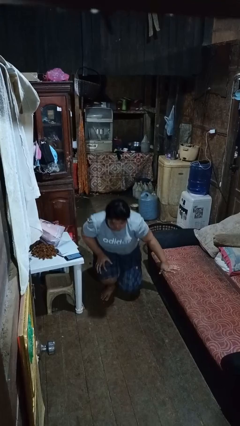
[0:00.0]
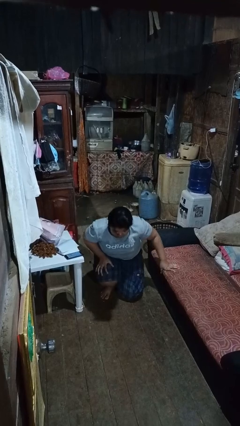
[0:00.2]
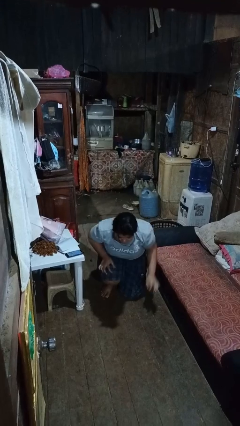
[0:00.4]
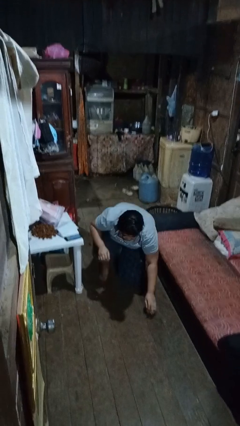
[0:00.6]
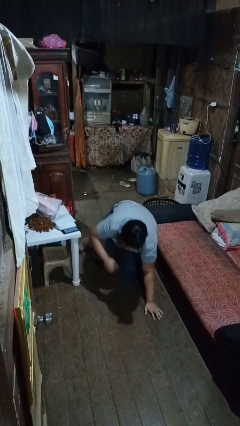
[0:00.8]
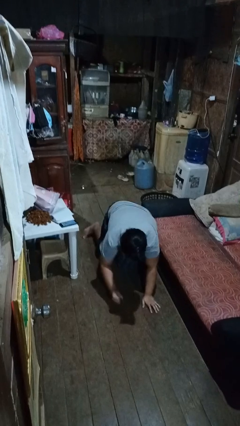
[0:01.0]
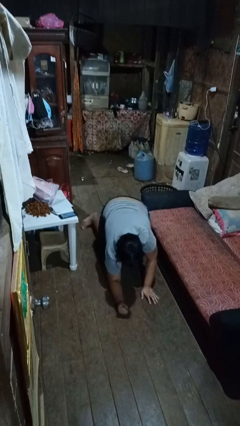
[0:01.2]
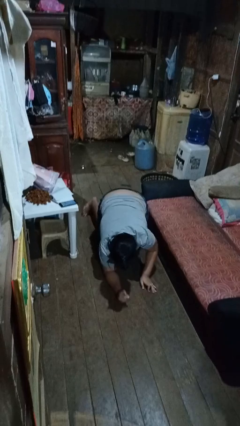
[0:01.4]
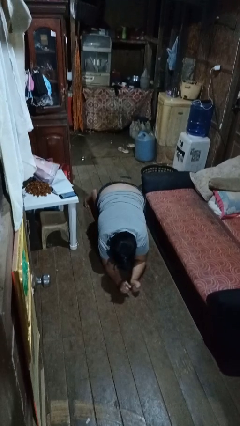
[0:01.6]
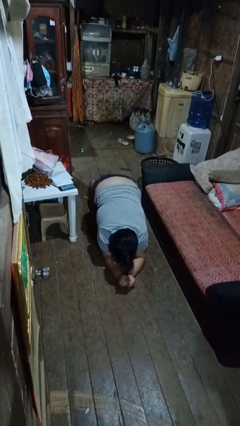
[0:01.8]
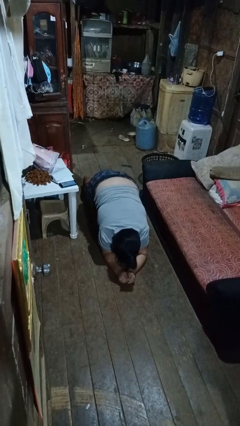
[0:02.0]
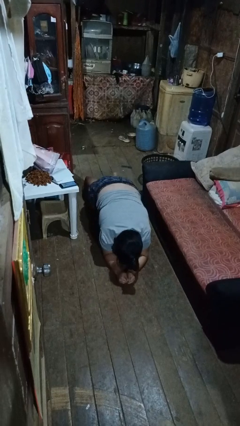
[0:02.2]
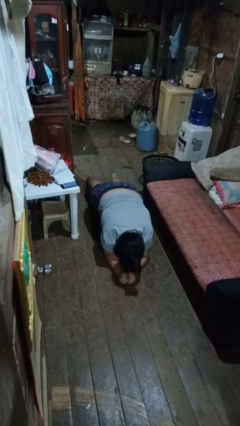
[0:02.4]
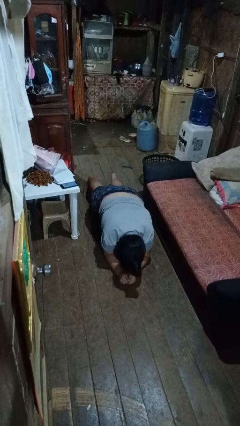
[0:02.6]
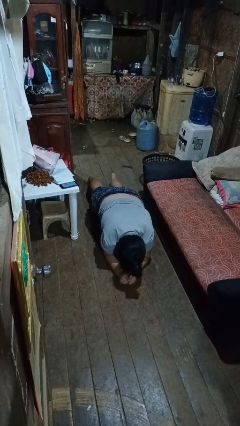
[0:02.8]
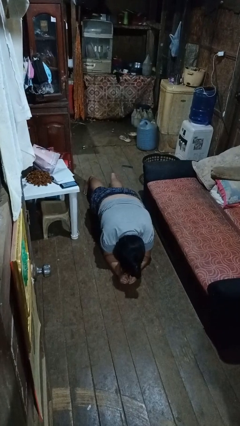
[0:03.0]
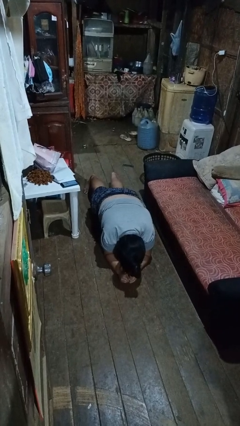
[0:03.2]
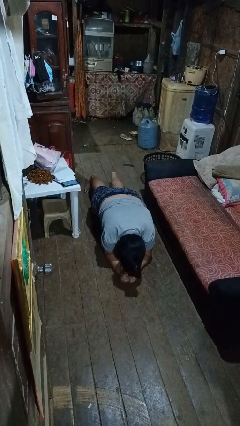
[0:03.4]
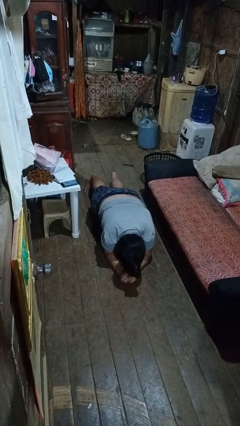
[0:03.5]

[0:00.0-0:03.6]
person exercises with plank

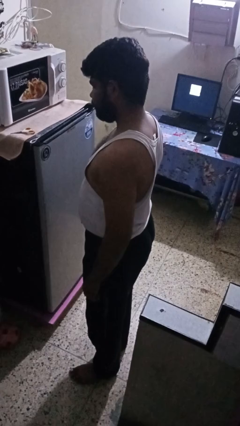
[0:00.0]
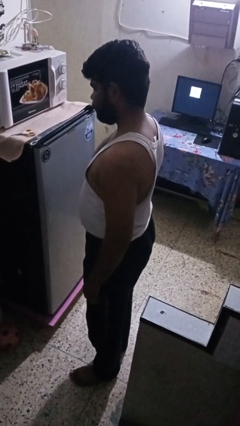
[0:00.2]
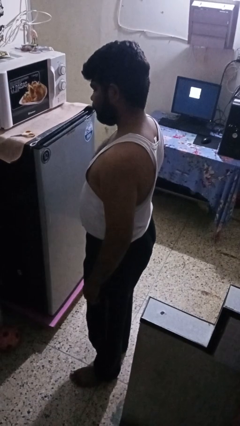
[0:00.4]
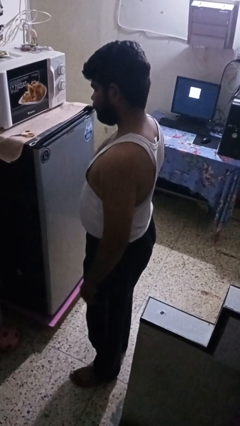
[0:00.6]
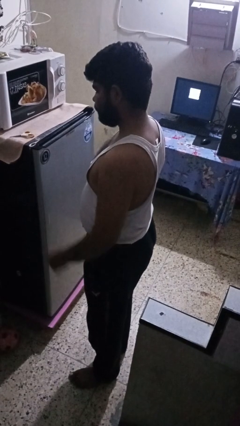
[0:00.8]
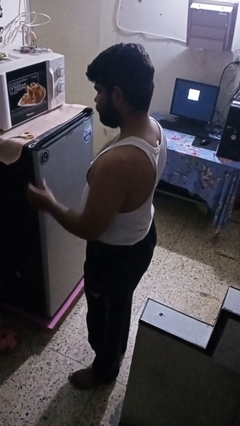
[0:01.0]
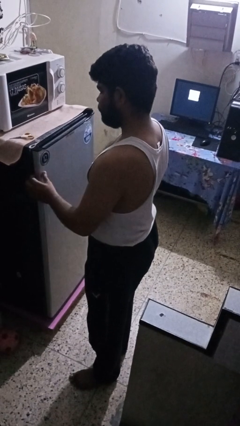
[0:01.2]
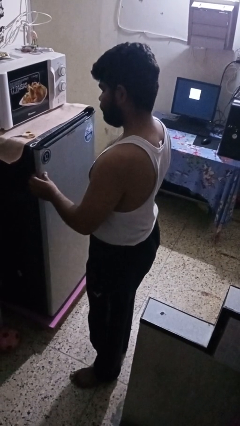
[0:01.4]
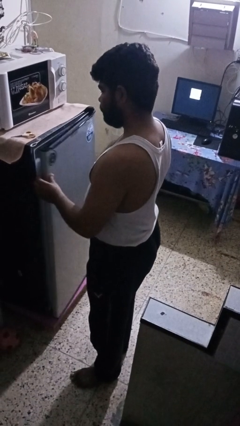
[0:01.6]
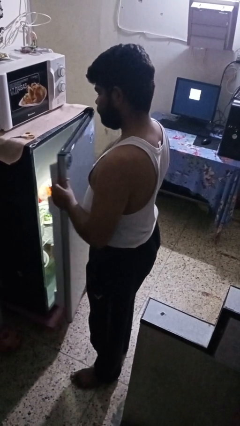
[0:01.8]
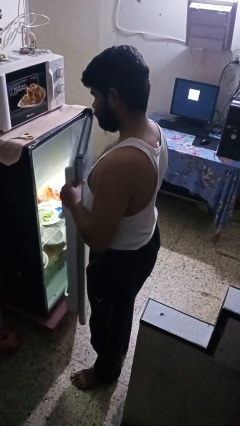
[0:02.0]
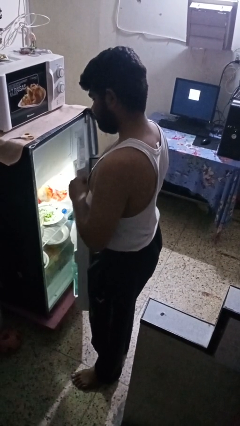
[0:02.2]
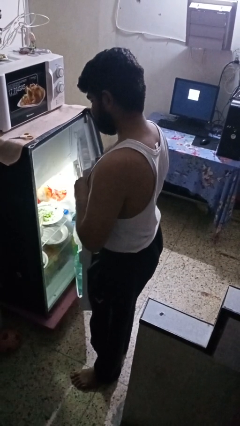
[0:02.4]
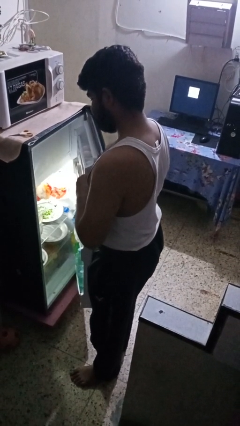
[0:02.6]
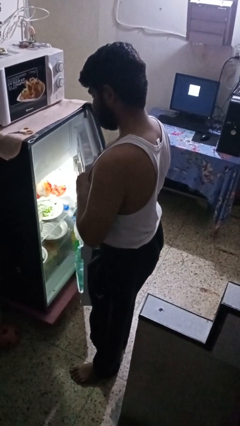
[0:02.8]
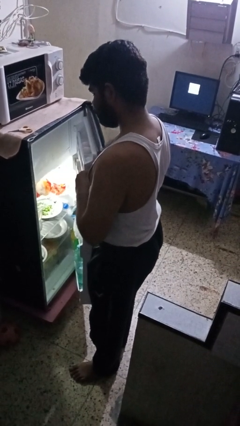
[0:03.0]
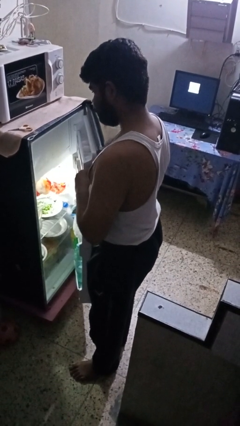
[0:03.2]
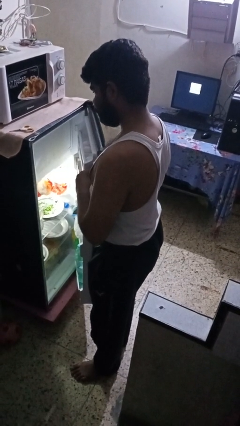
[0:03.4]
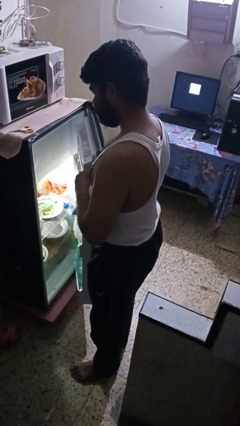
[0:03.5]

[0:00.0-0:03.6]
person opens refrigerator

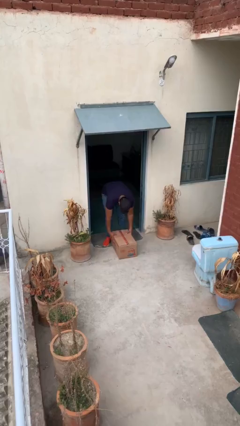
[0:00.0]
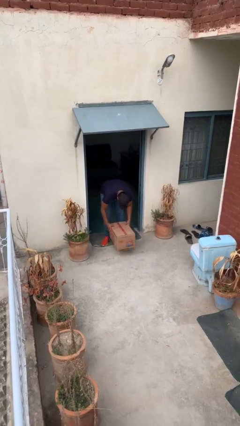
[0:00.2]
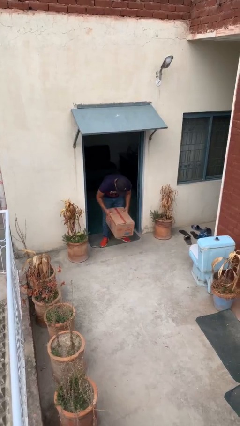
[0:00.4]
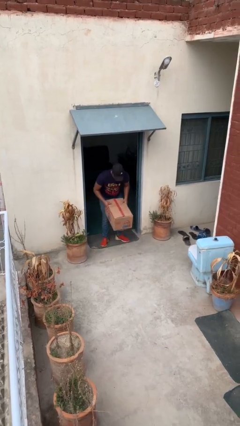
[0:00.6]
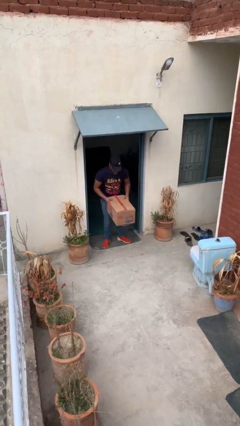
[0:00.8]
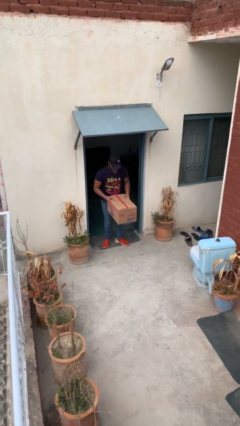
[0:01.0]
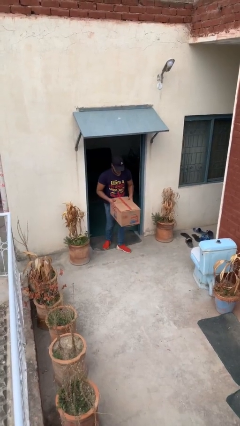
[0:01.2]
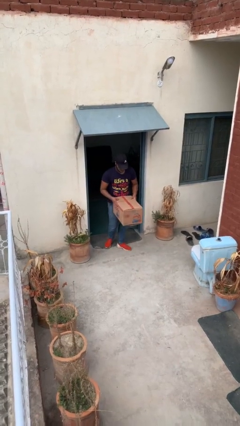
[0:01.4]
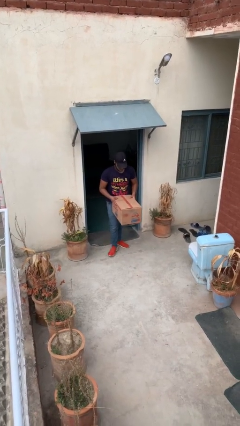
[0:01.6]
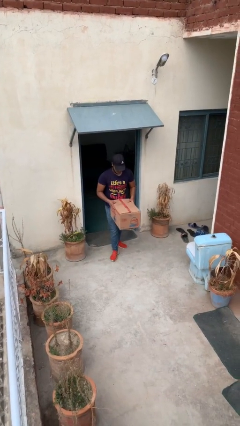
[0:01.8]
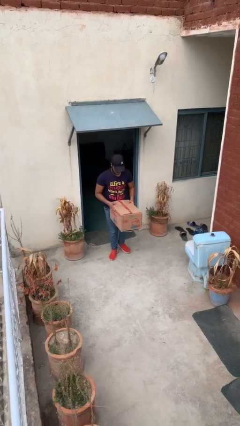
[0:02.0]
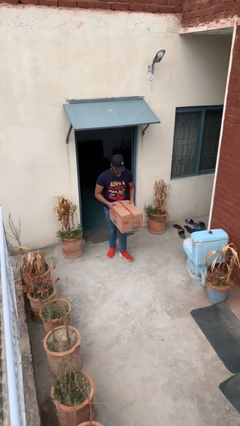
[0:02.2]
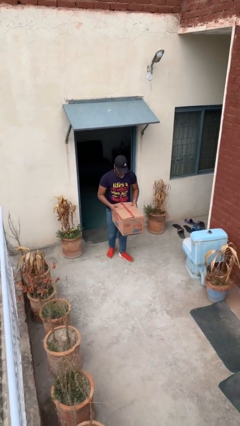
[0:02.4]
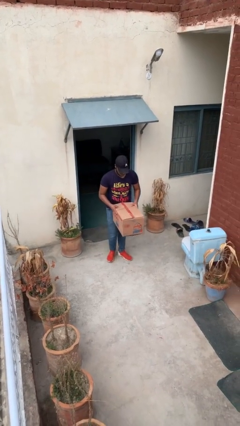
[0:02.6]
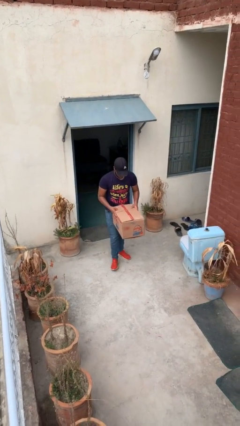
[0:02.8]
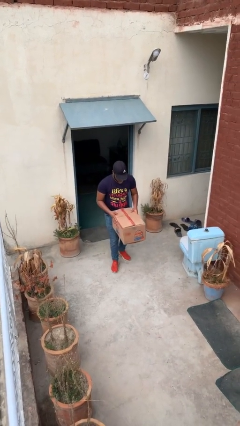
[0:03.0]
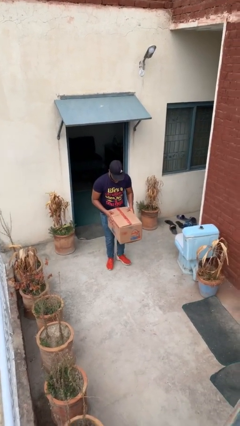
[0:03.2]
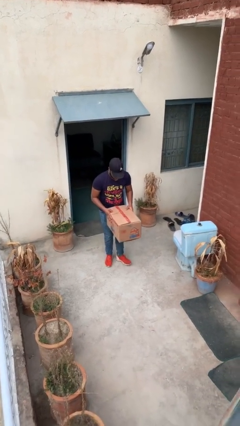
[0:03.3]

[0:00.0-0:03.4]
person carries heavy object

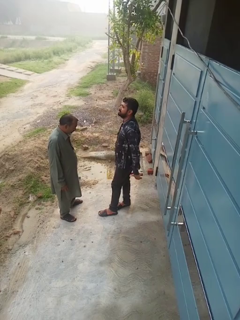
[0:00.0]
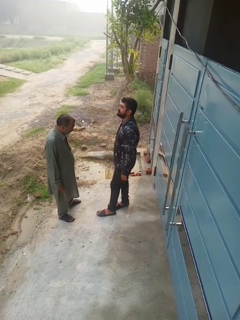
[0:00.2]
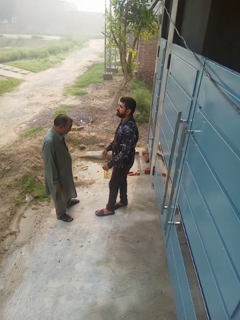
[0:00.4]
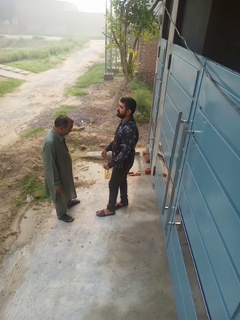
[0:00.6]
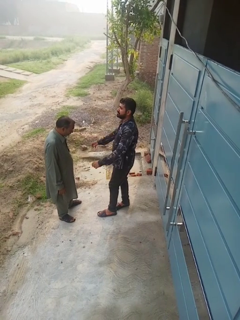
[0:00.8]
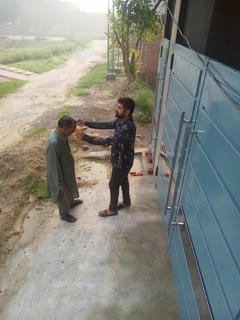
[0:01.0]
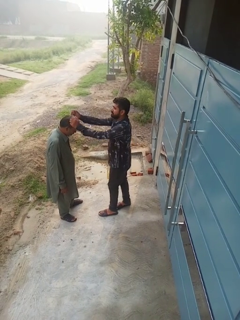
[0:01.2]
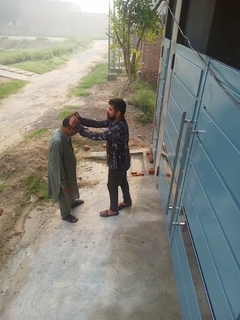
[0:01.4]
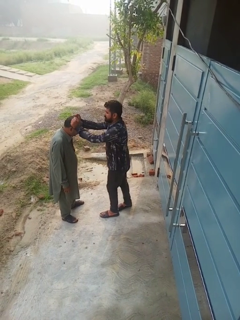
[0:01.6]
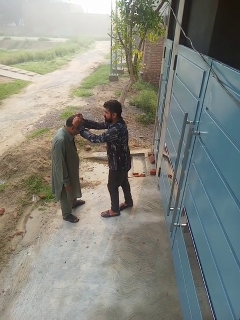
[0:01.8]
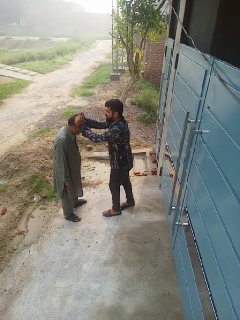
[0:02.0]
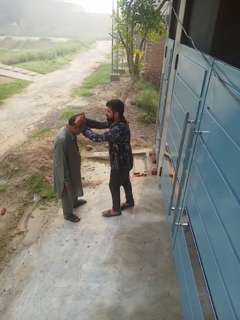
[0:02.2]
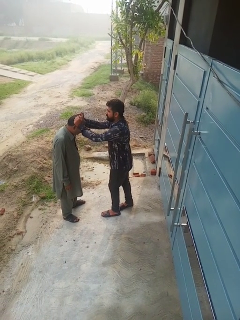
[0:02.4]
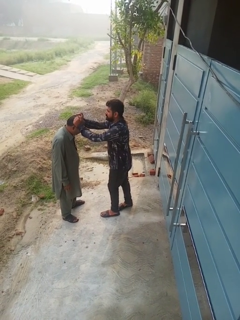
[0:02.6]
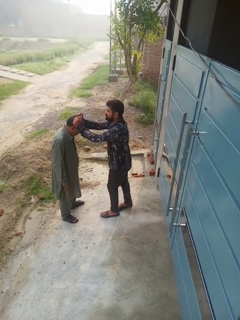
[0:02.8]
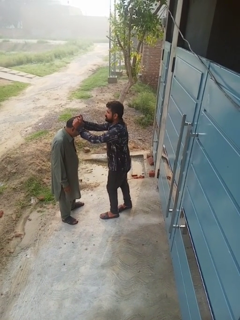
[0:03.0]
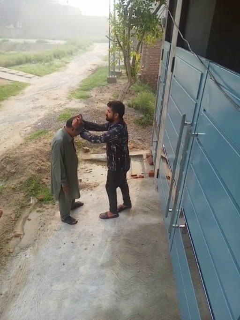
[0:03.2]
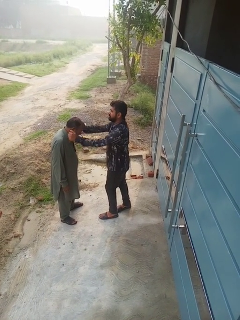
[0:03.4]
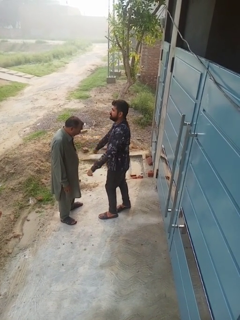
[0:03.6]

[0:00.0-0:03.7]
person grabs person by hair

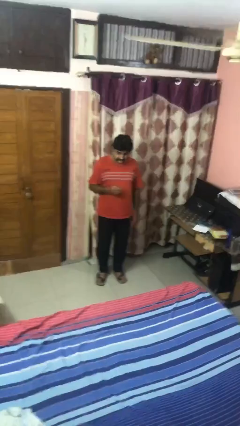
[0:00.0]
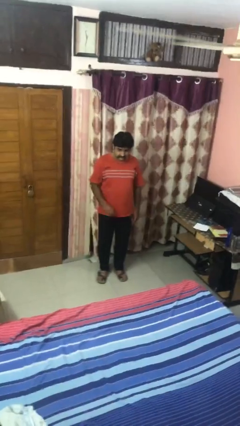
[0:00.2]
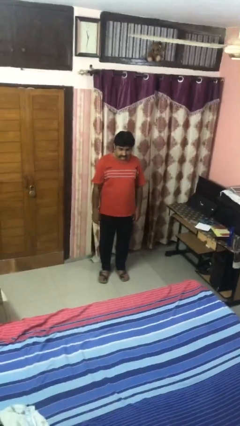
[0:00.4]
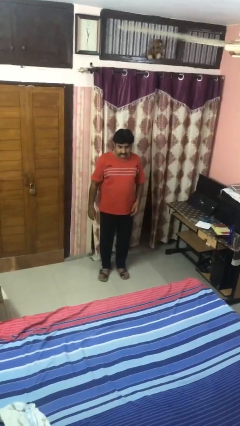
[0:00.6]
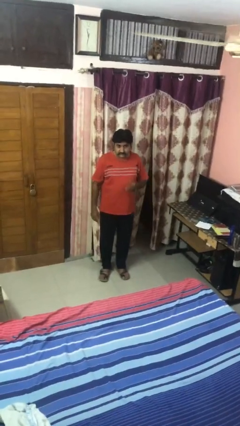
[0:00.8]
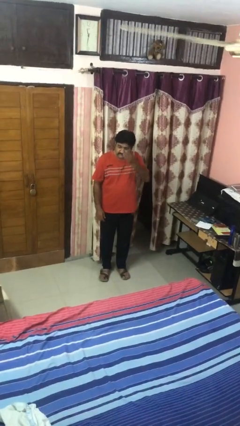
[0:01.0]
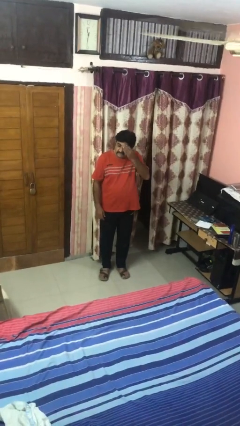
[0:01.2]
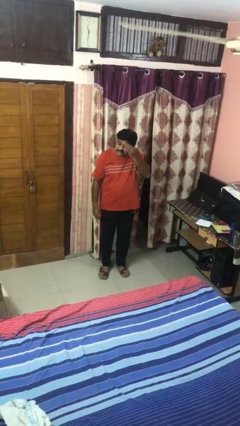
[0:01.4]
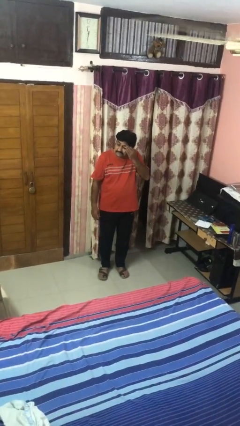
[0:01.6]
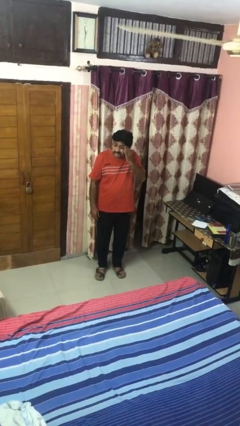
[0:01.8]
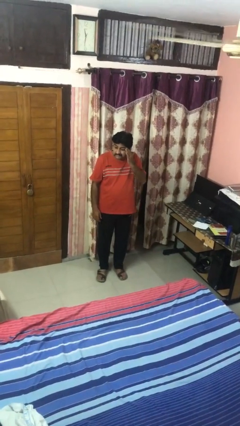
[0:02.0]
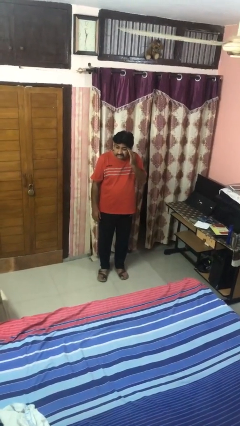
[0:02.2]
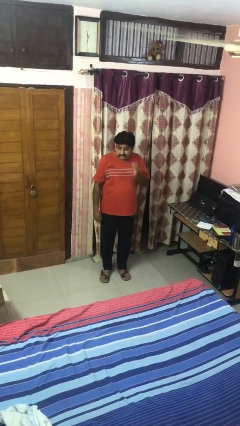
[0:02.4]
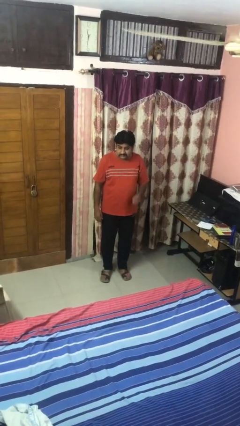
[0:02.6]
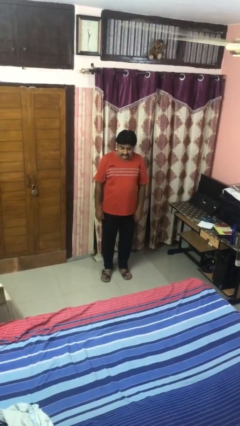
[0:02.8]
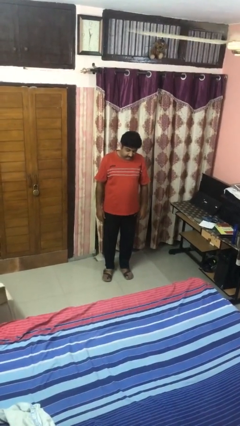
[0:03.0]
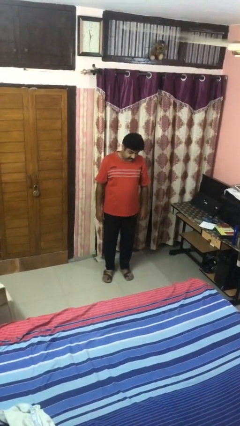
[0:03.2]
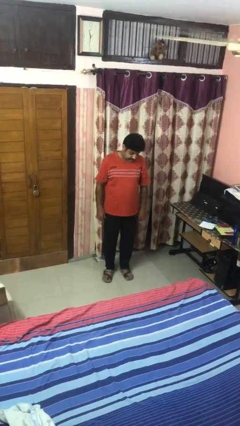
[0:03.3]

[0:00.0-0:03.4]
person swats bug

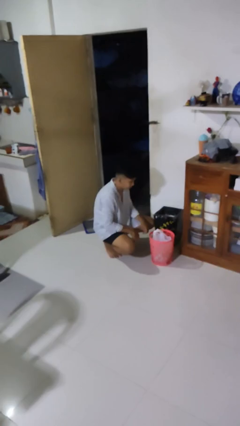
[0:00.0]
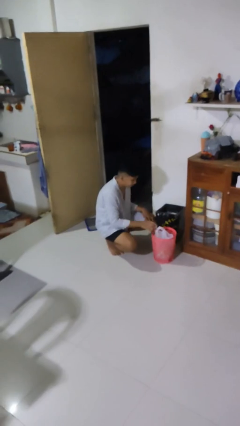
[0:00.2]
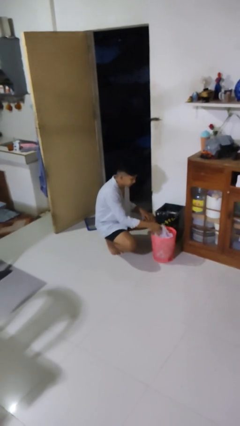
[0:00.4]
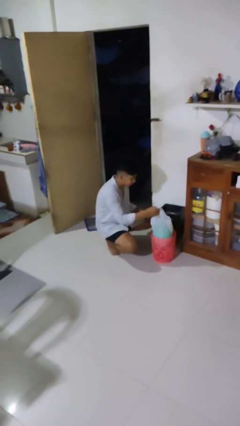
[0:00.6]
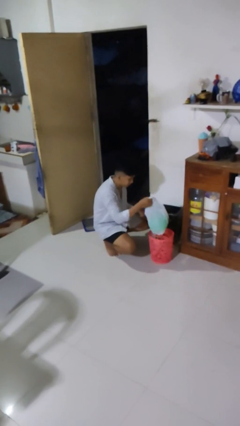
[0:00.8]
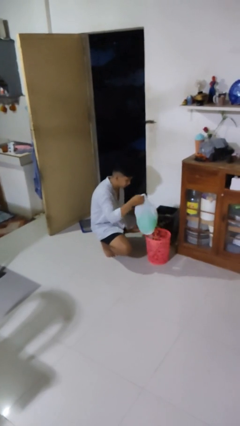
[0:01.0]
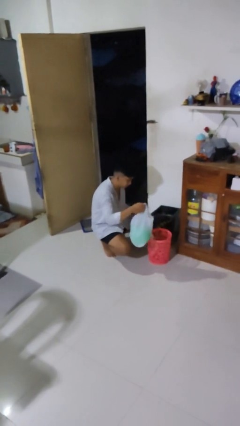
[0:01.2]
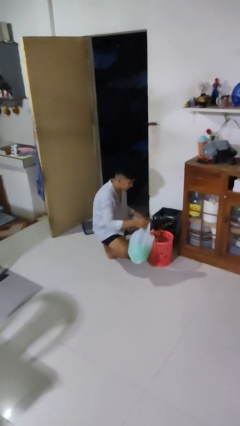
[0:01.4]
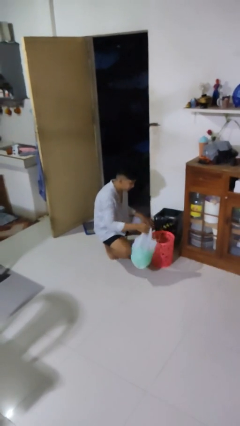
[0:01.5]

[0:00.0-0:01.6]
person removes trashbag from trashcan
